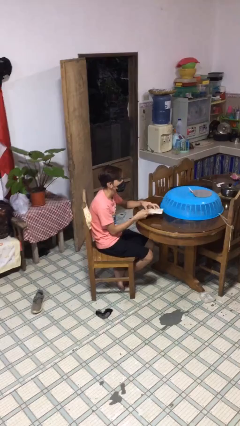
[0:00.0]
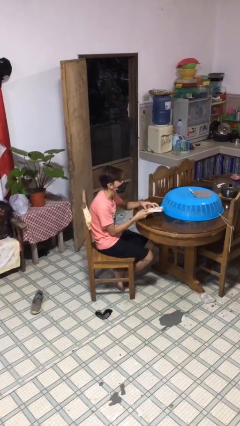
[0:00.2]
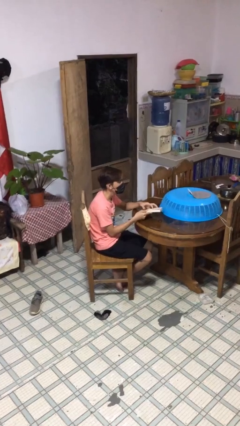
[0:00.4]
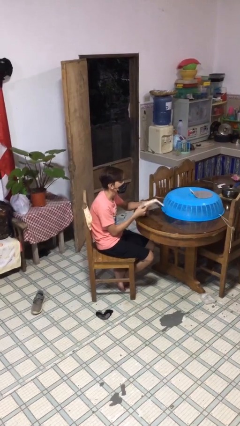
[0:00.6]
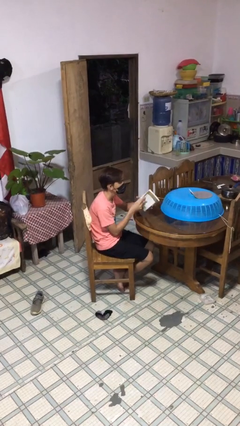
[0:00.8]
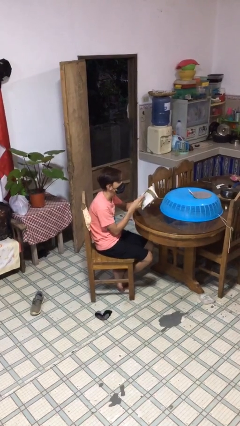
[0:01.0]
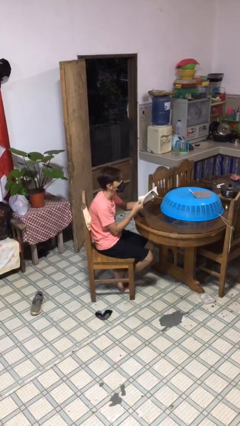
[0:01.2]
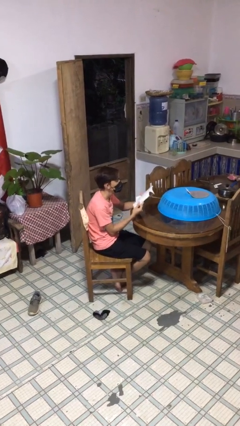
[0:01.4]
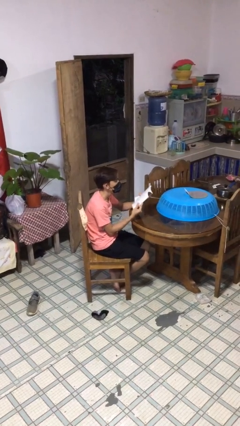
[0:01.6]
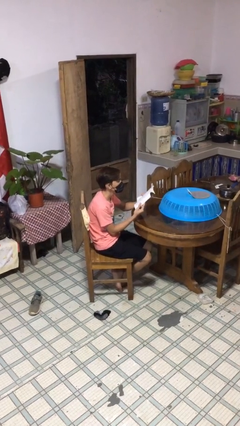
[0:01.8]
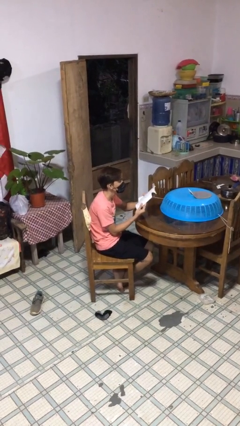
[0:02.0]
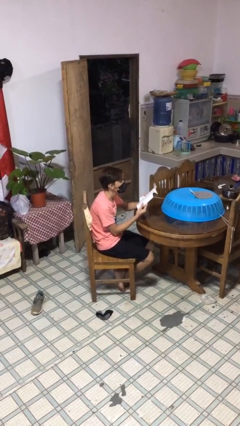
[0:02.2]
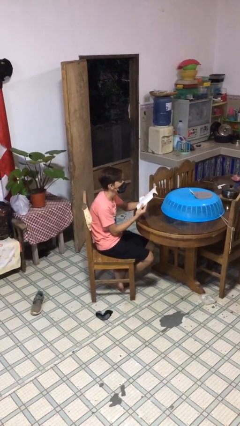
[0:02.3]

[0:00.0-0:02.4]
person reads document

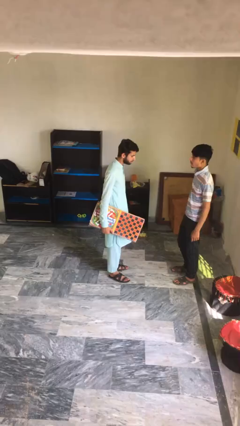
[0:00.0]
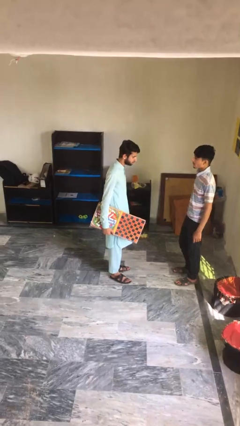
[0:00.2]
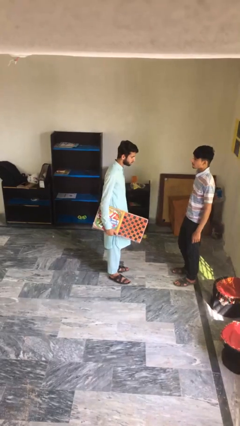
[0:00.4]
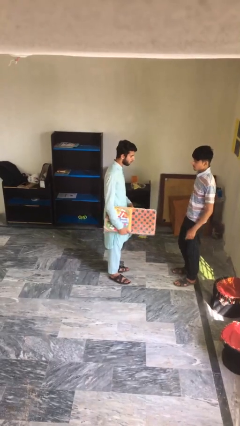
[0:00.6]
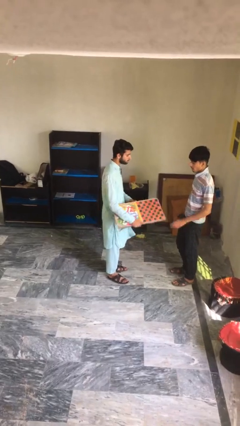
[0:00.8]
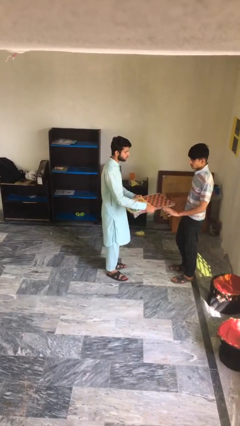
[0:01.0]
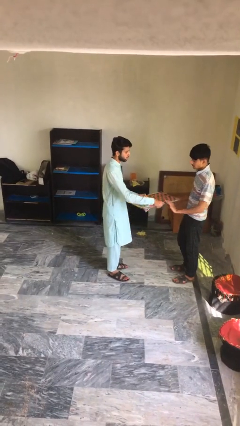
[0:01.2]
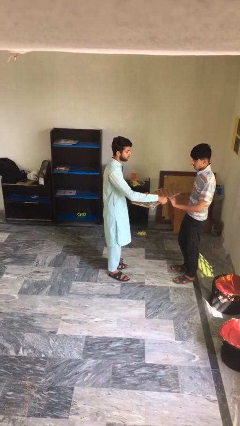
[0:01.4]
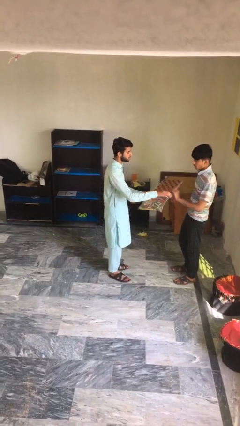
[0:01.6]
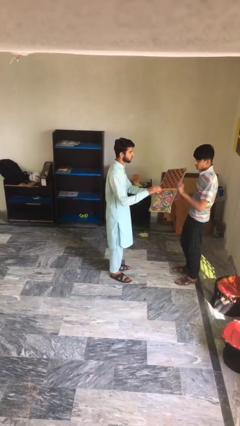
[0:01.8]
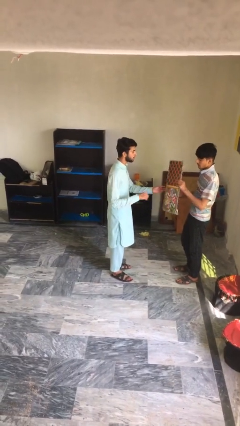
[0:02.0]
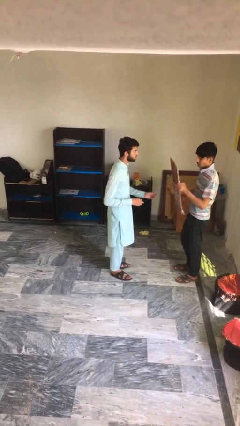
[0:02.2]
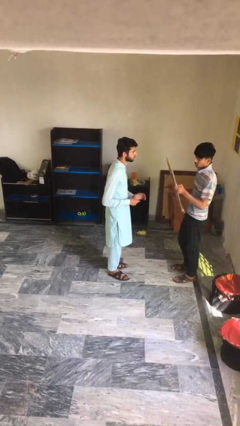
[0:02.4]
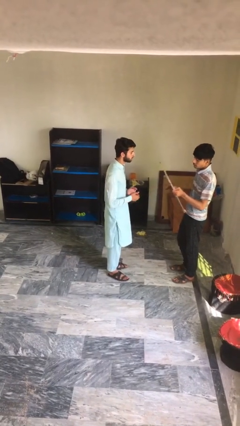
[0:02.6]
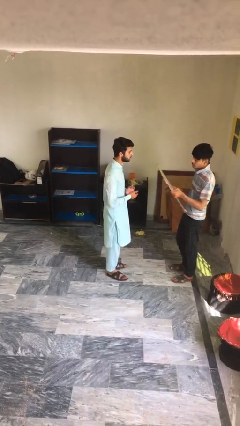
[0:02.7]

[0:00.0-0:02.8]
person transfers object to person

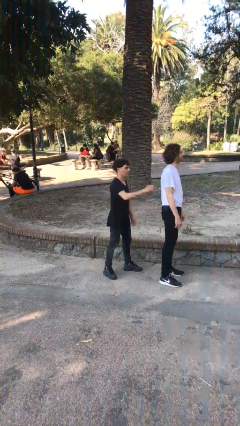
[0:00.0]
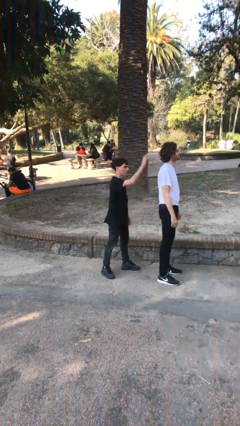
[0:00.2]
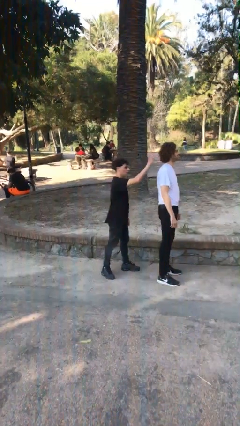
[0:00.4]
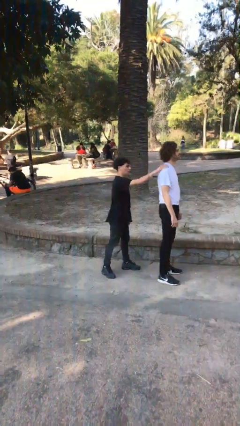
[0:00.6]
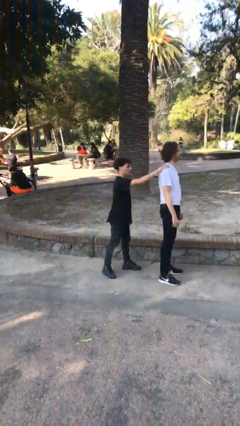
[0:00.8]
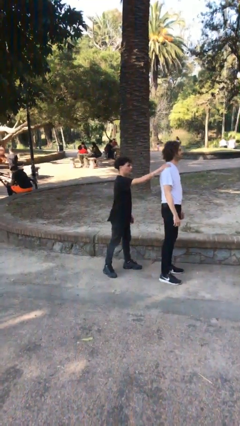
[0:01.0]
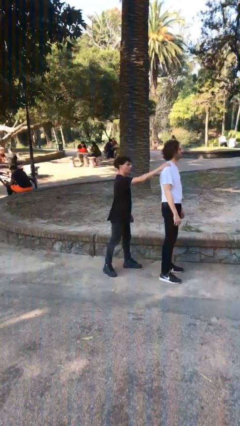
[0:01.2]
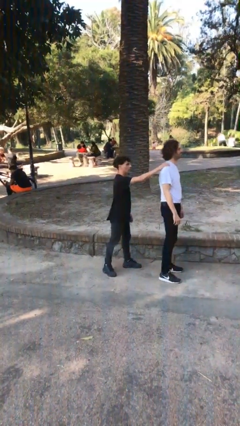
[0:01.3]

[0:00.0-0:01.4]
person grabs person by shoulder

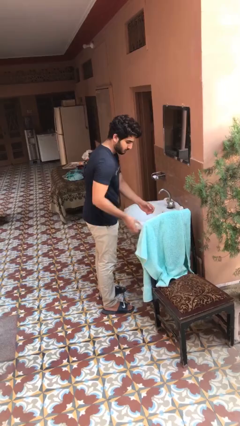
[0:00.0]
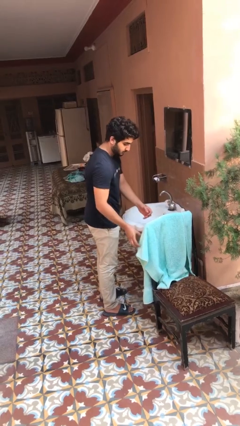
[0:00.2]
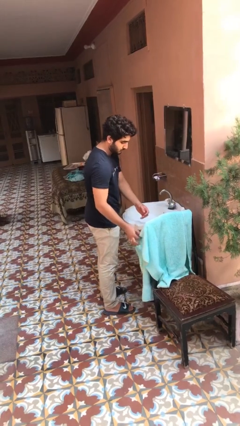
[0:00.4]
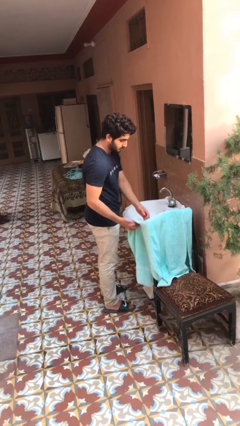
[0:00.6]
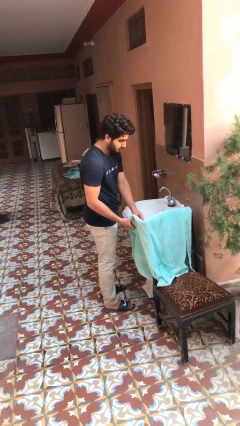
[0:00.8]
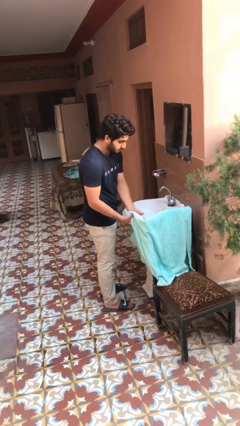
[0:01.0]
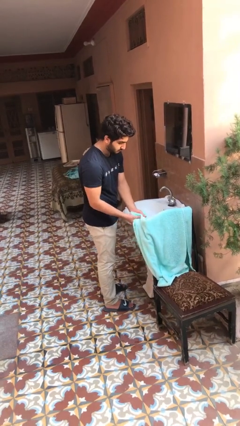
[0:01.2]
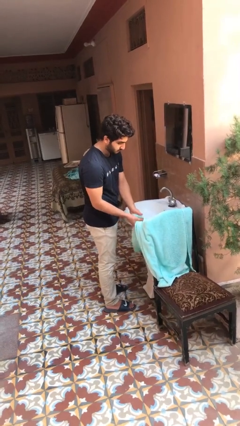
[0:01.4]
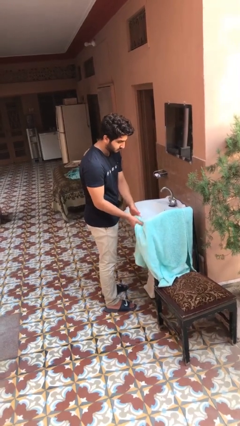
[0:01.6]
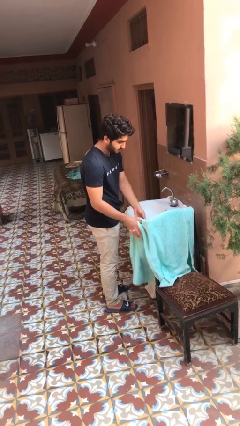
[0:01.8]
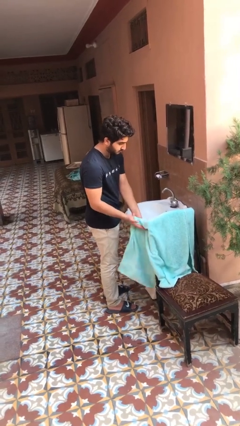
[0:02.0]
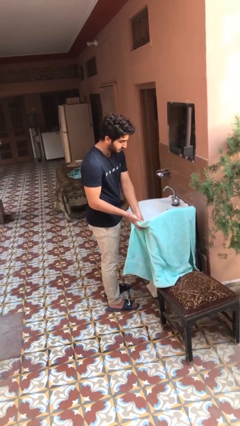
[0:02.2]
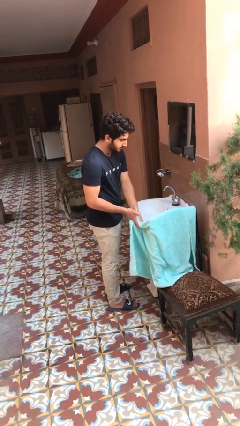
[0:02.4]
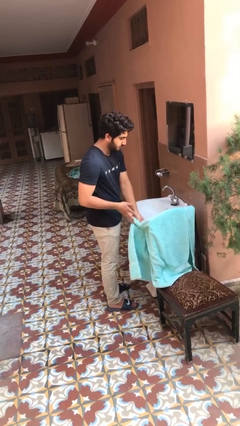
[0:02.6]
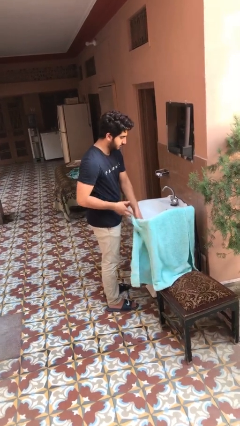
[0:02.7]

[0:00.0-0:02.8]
person dries hands with towel

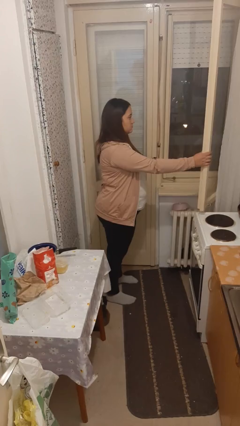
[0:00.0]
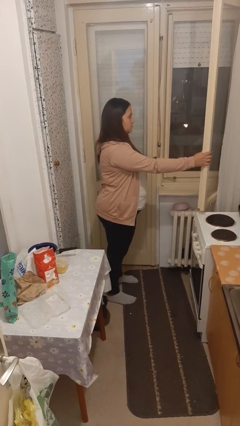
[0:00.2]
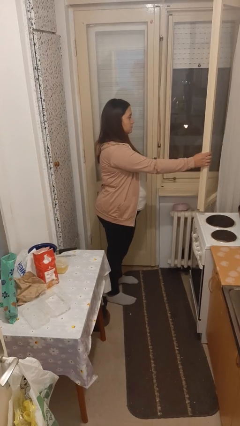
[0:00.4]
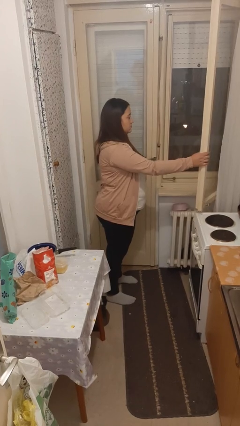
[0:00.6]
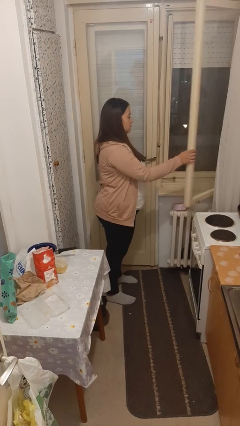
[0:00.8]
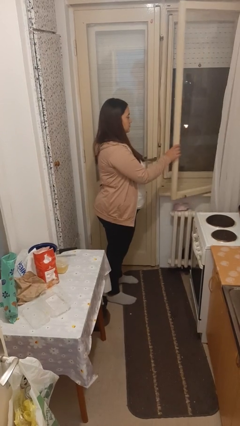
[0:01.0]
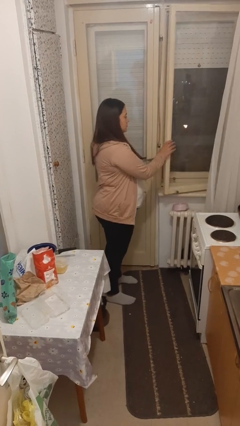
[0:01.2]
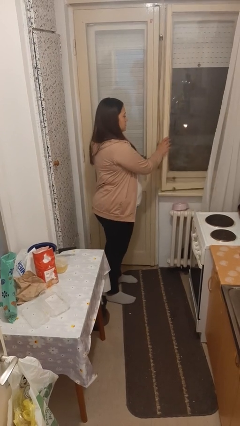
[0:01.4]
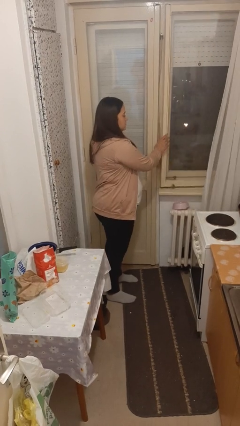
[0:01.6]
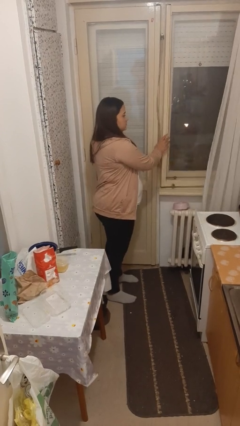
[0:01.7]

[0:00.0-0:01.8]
person closes home window

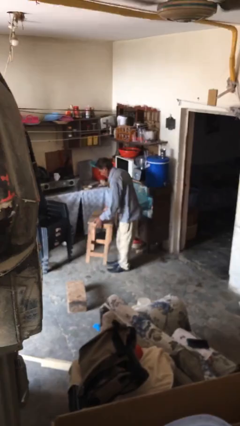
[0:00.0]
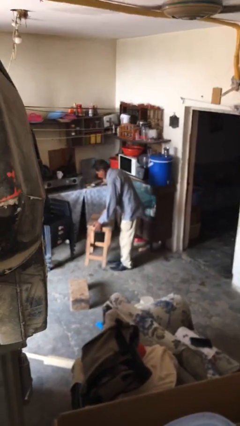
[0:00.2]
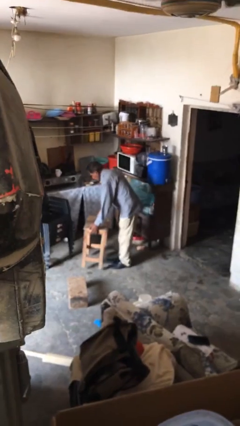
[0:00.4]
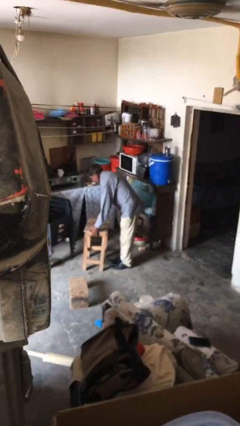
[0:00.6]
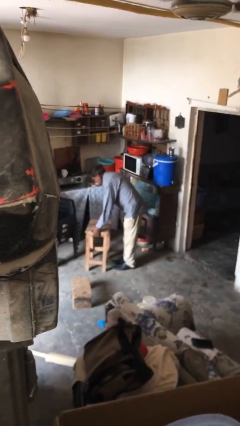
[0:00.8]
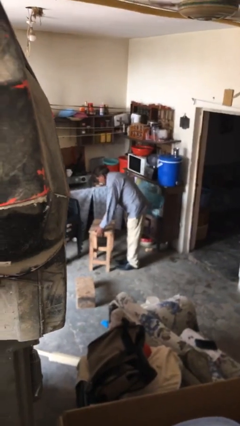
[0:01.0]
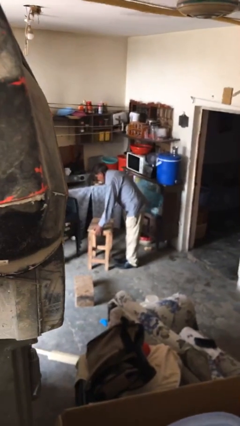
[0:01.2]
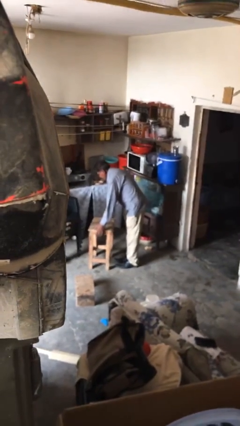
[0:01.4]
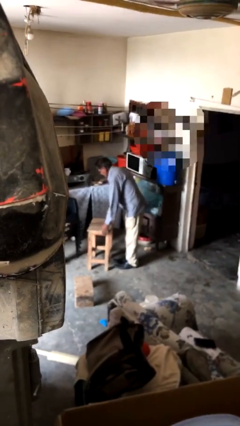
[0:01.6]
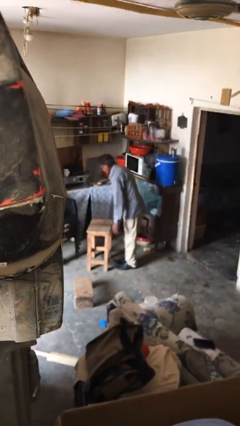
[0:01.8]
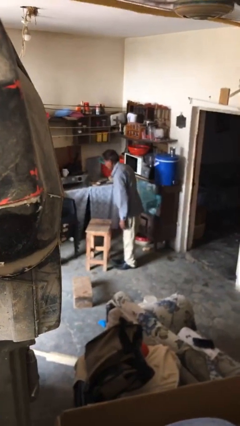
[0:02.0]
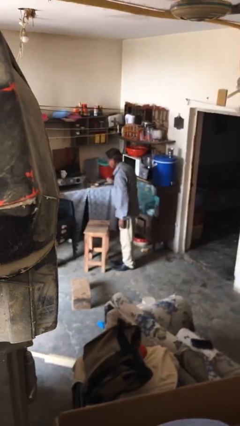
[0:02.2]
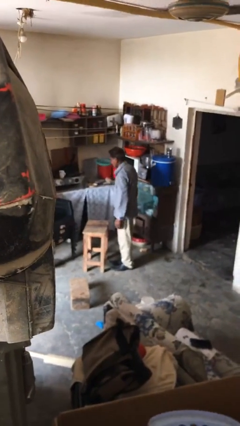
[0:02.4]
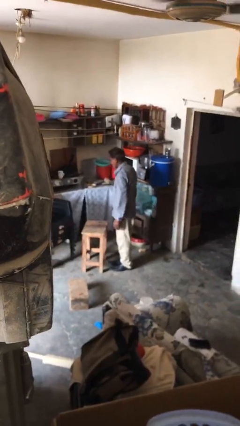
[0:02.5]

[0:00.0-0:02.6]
person puts down object on floor

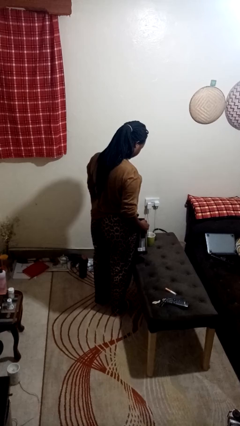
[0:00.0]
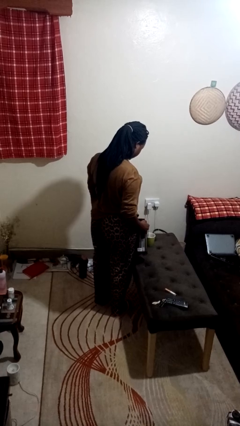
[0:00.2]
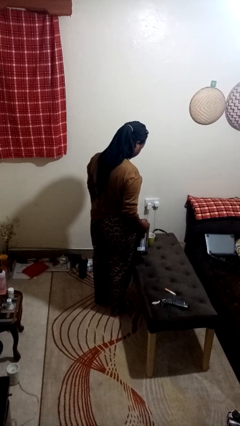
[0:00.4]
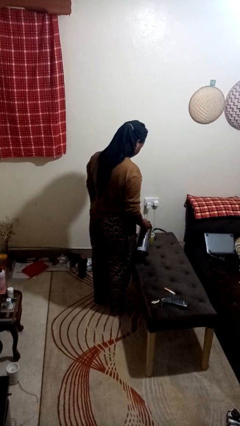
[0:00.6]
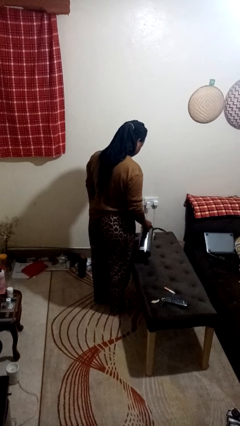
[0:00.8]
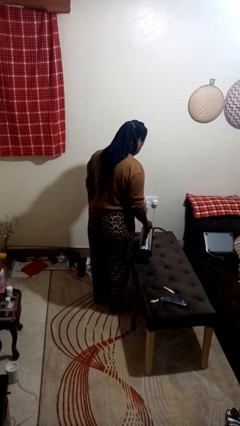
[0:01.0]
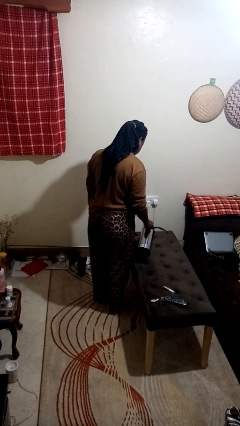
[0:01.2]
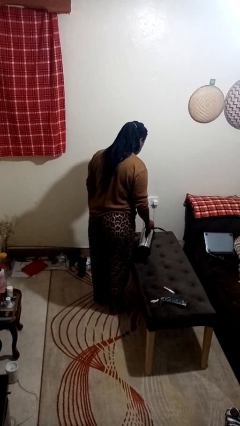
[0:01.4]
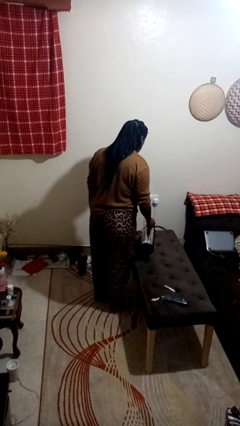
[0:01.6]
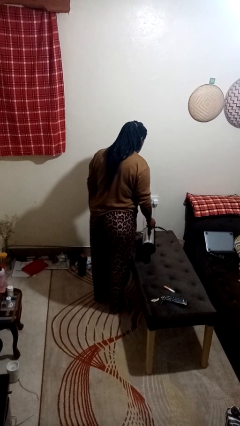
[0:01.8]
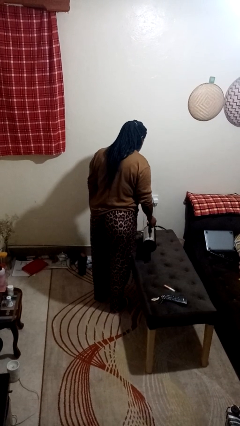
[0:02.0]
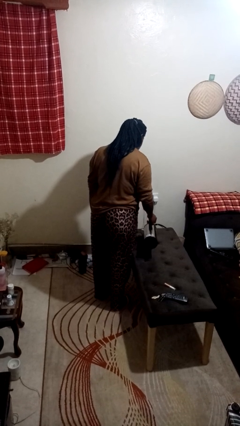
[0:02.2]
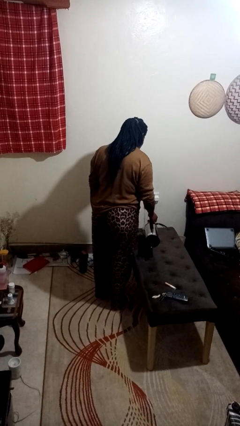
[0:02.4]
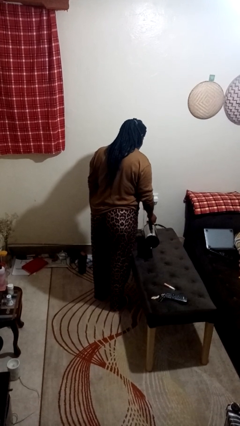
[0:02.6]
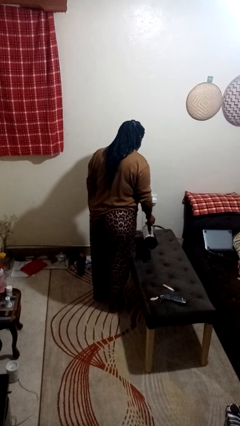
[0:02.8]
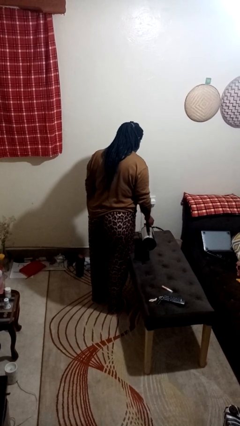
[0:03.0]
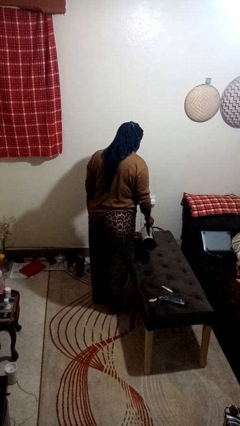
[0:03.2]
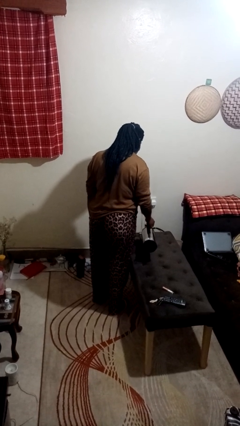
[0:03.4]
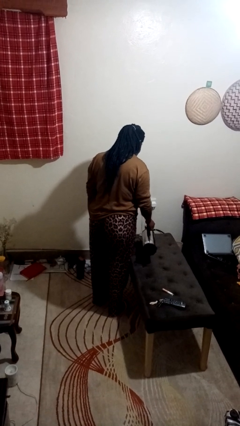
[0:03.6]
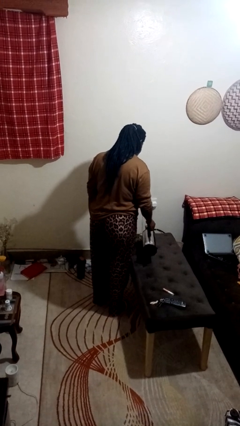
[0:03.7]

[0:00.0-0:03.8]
person pours coffee into mug
